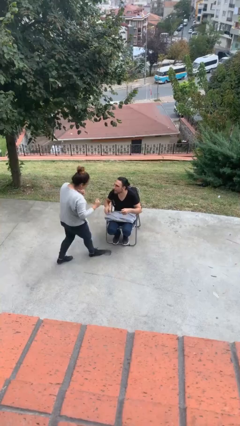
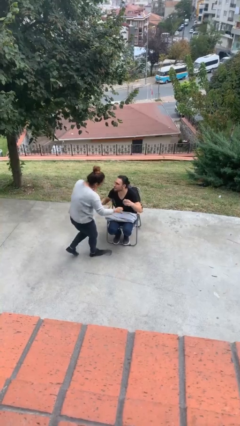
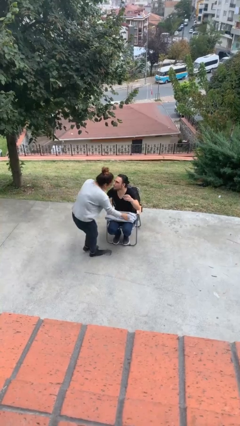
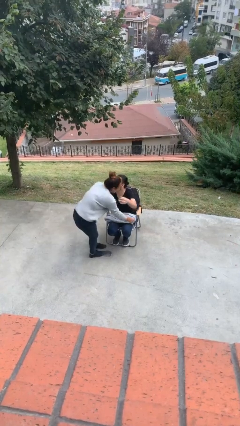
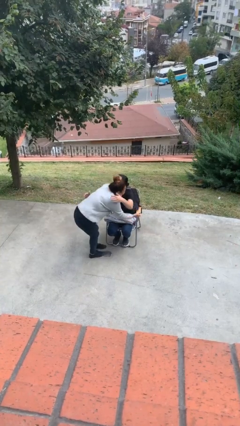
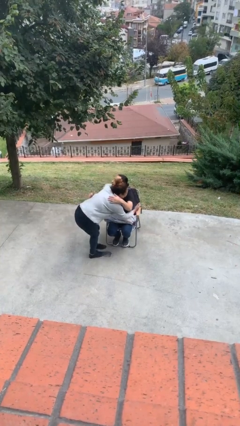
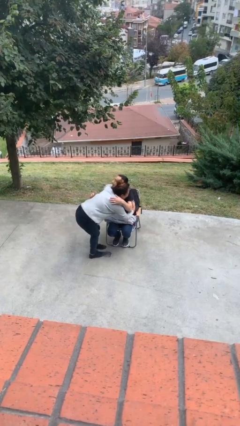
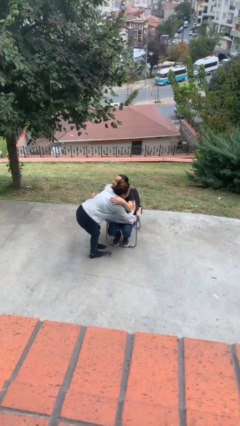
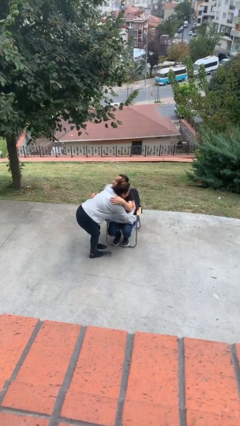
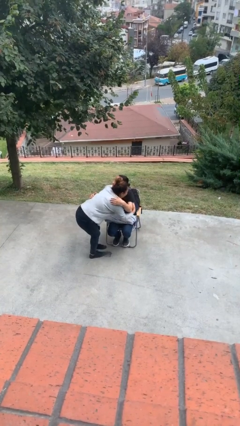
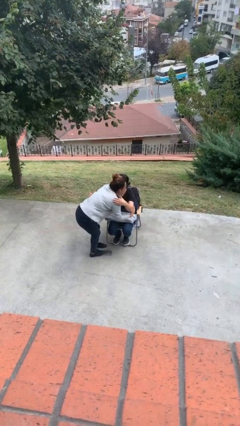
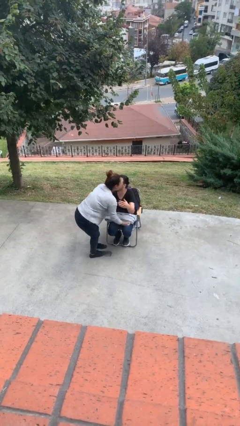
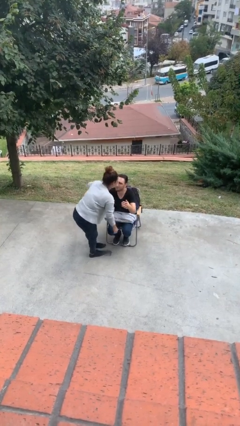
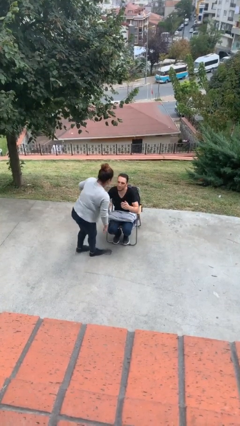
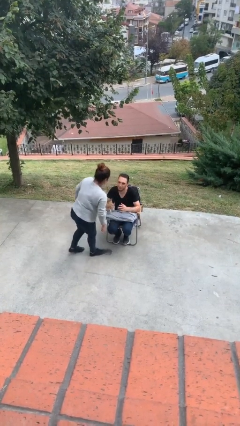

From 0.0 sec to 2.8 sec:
person embraces person

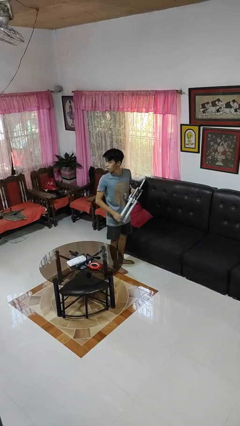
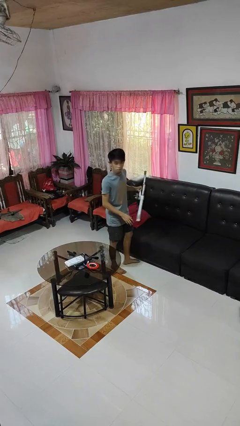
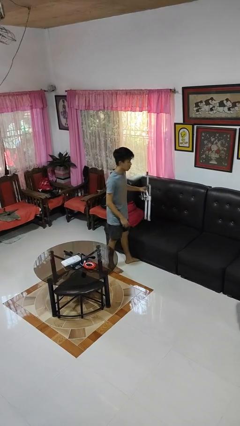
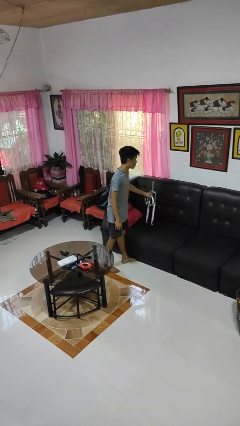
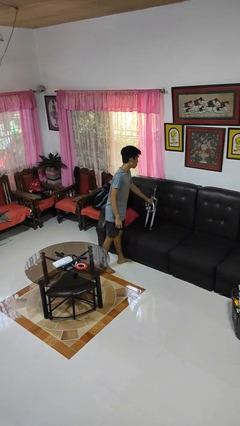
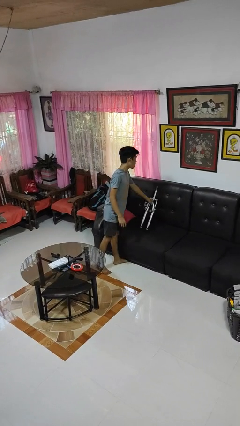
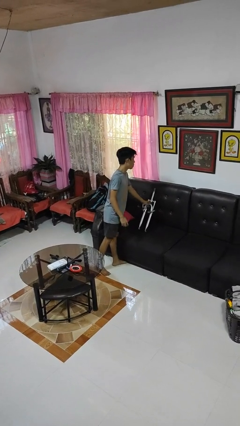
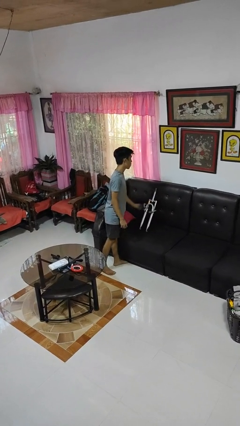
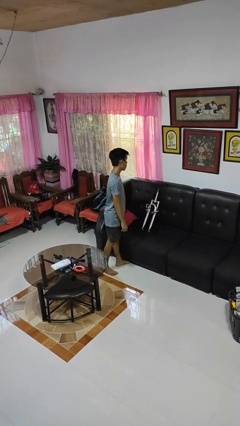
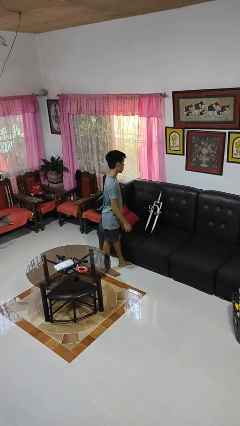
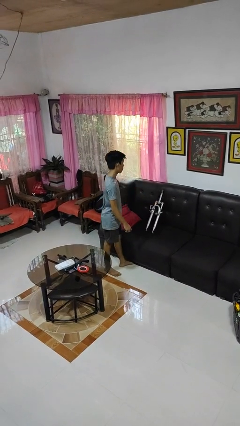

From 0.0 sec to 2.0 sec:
person puts down object on couch

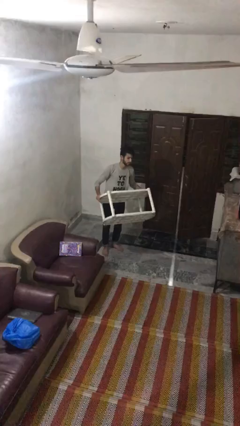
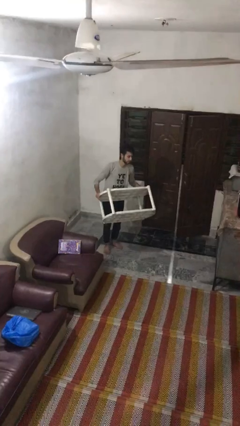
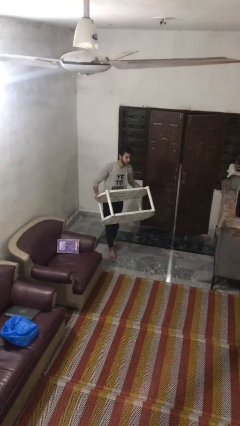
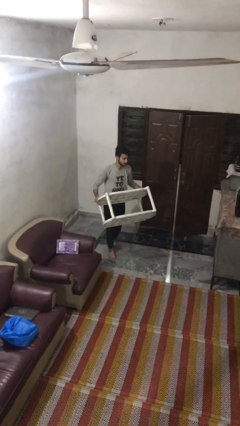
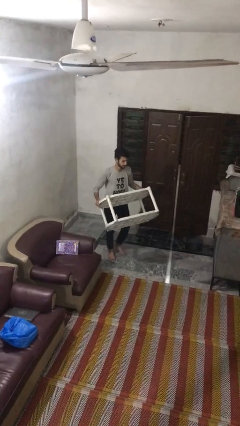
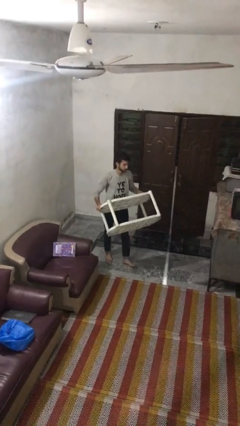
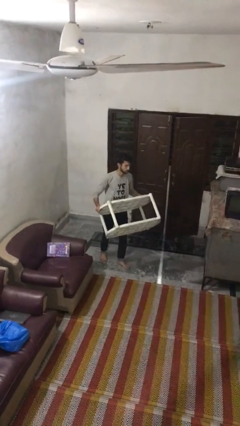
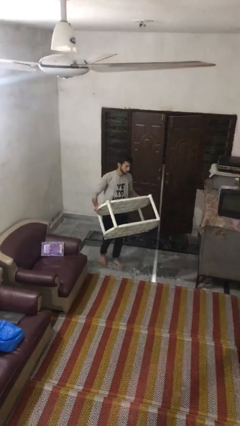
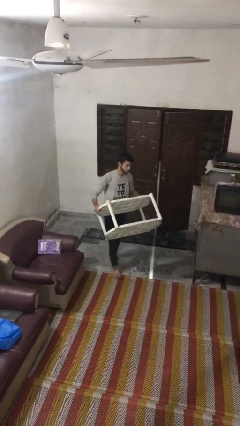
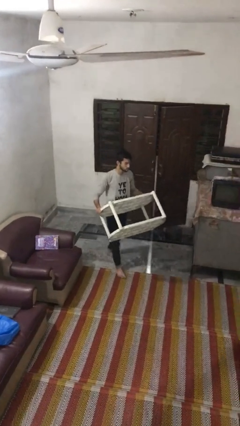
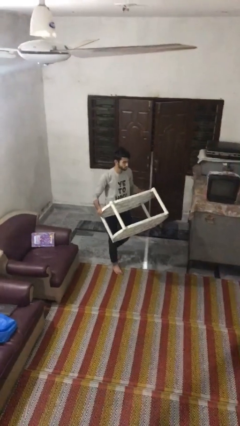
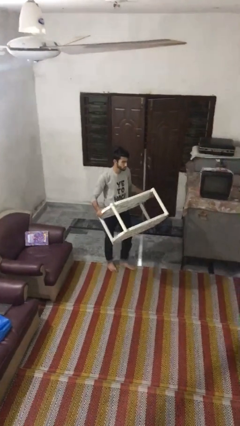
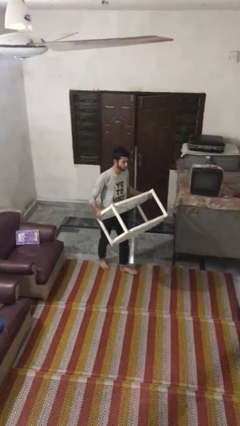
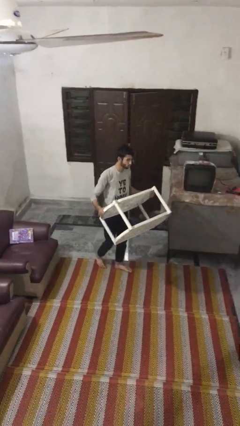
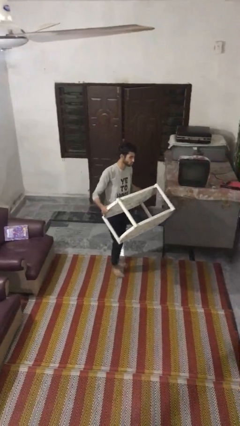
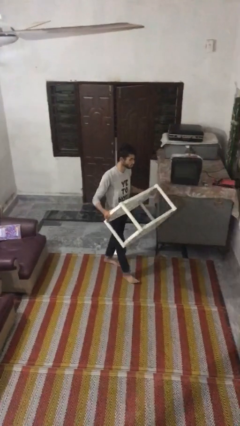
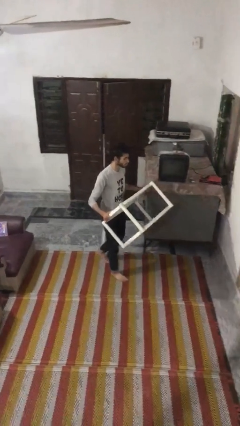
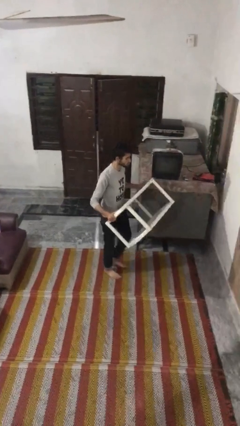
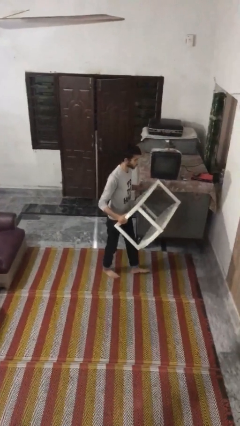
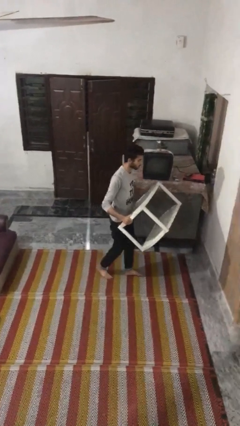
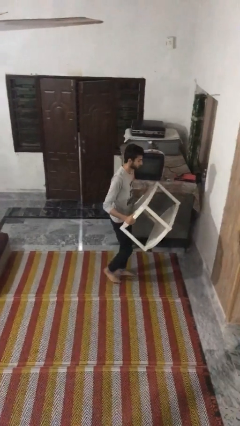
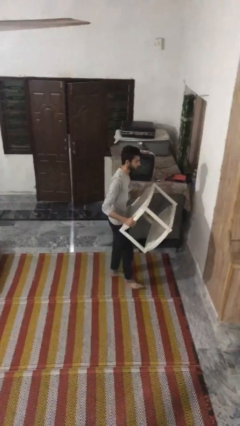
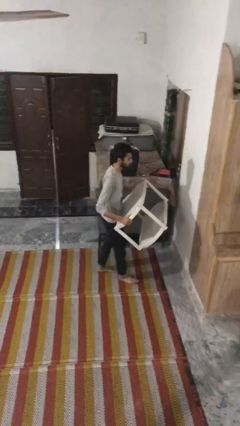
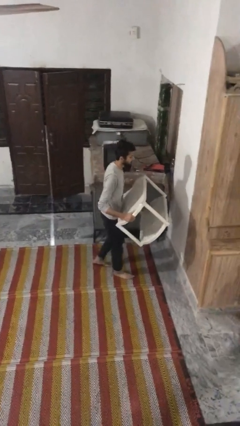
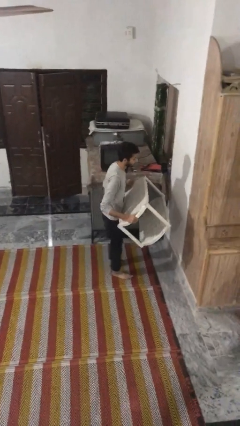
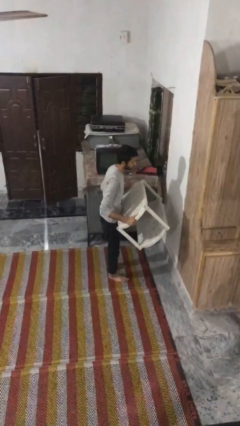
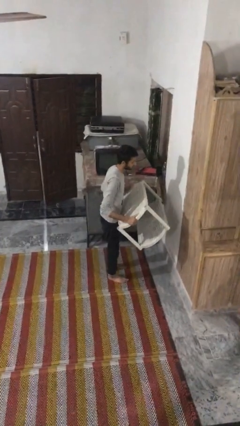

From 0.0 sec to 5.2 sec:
person carries heavy object

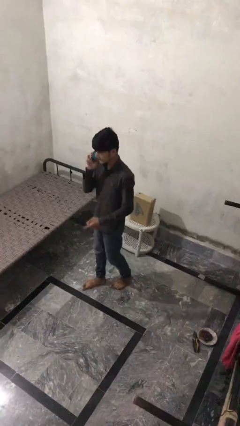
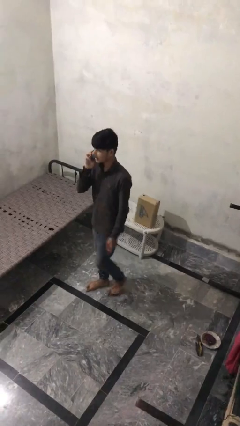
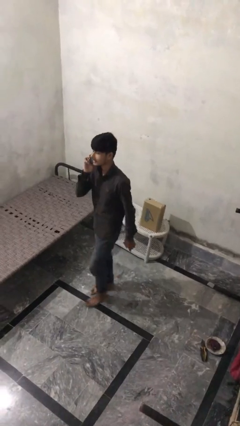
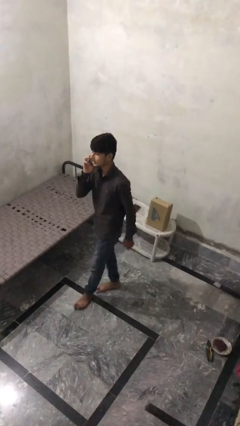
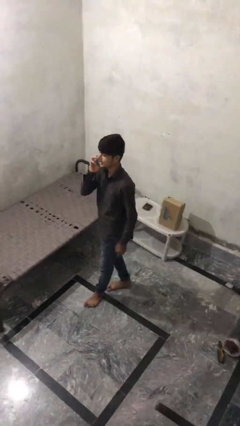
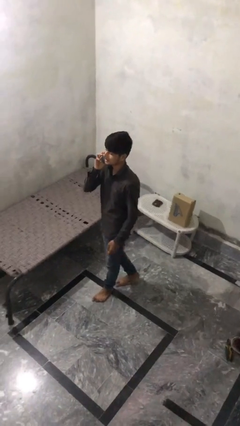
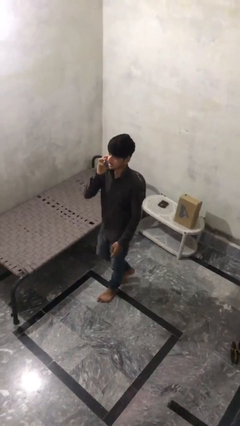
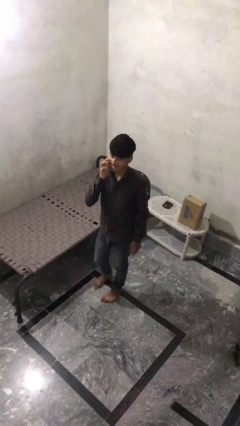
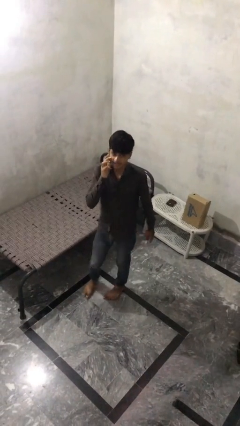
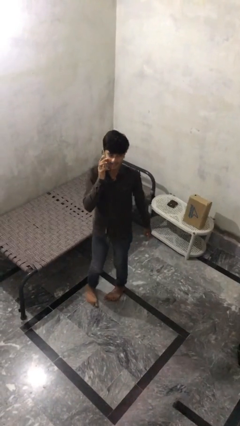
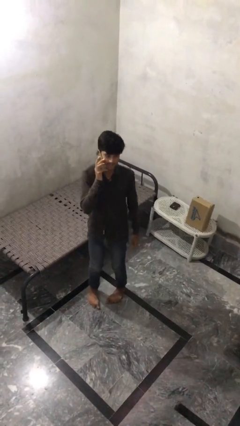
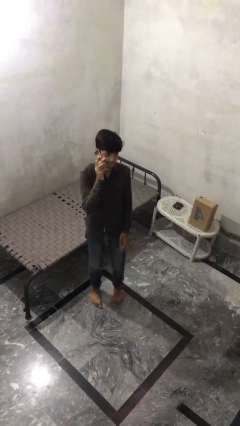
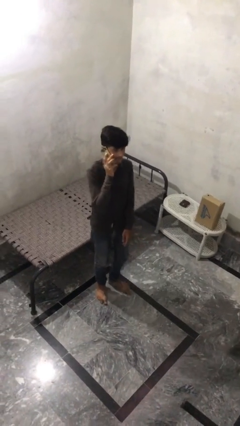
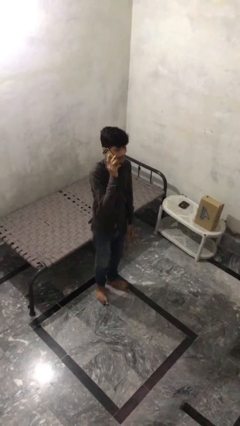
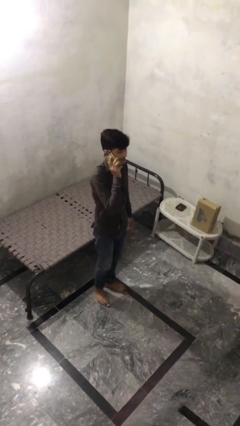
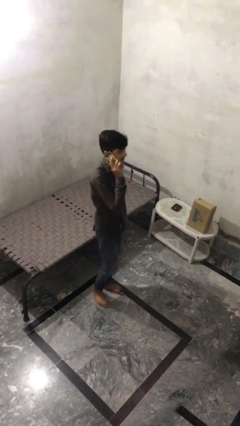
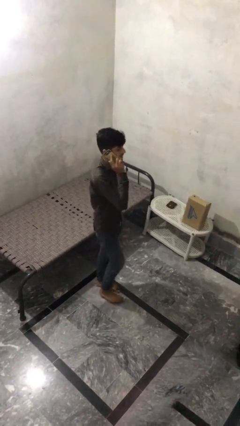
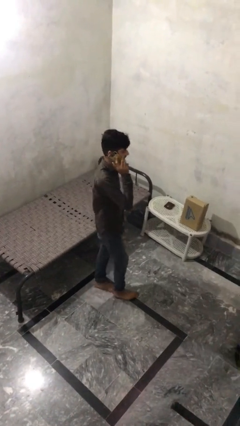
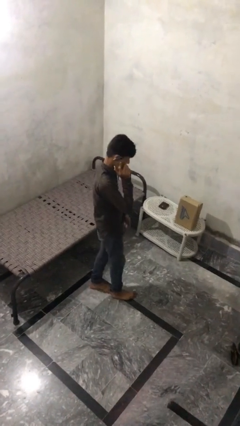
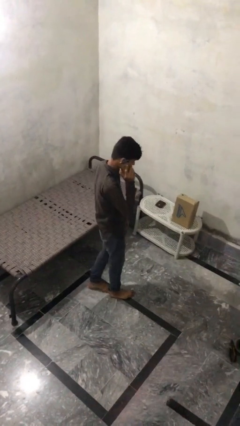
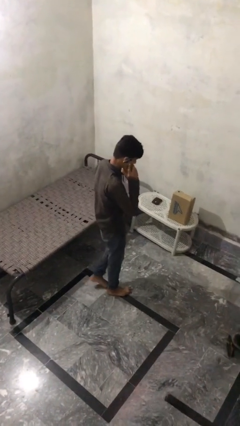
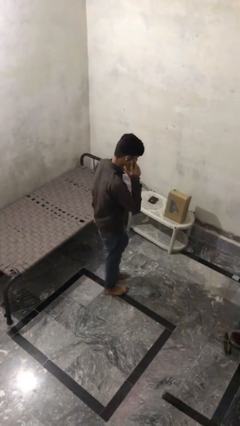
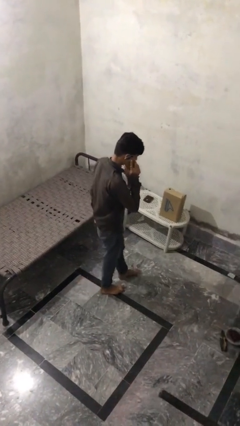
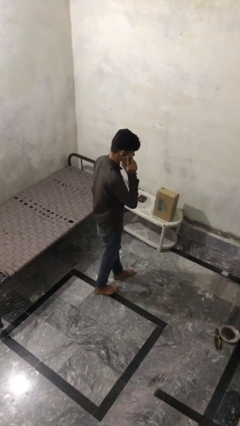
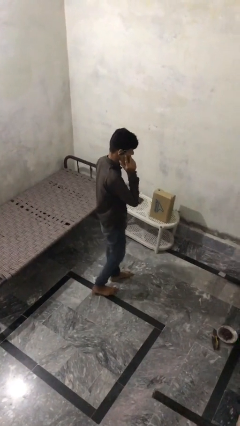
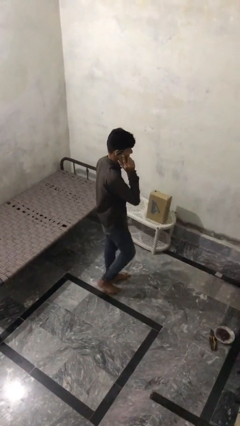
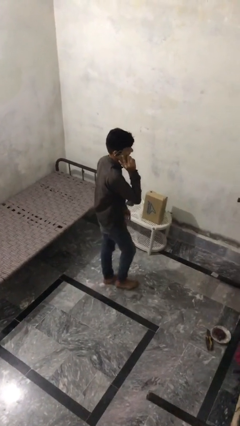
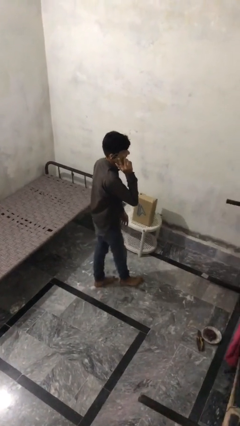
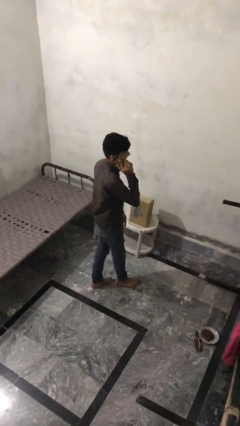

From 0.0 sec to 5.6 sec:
person talks on phone

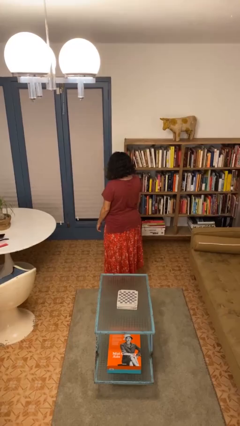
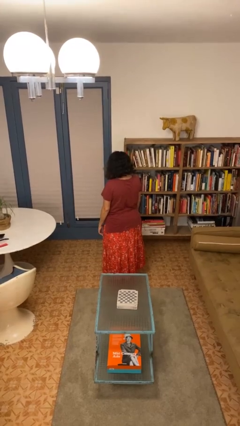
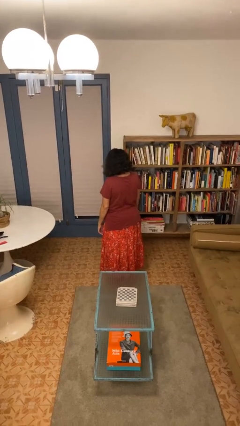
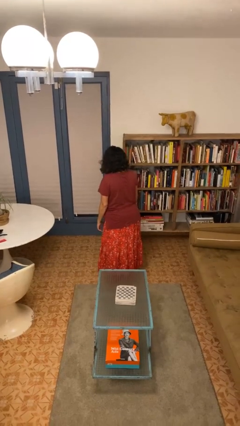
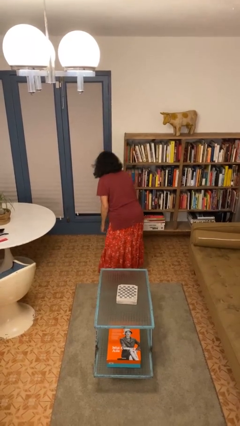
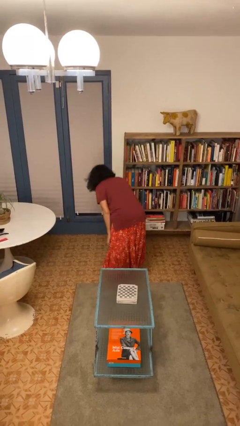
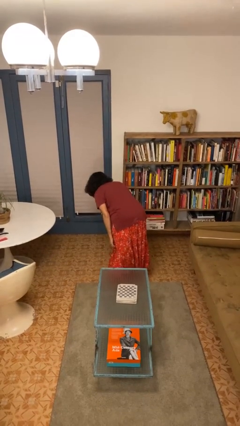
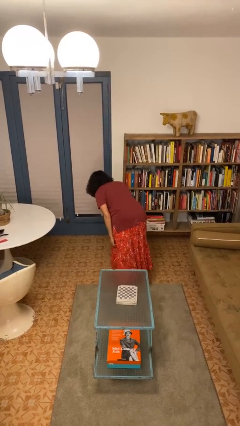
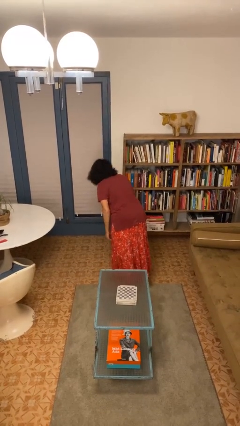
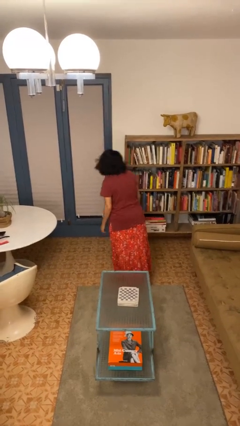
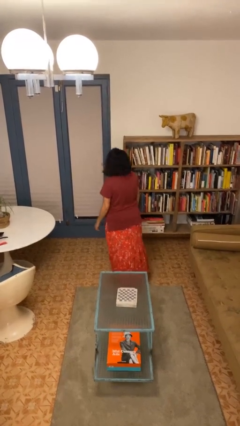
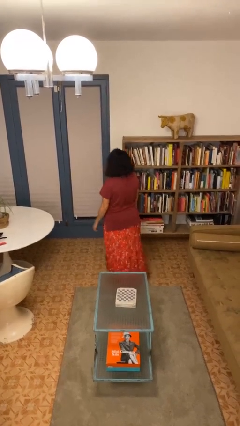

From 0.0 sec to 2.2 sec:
person bows
